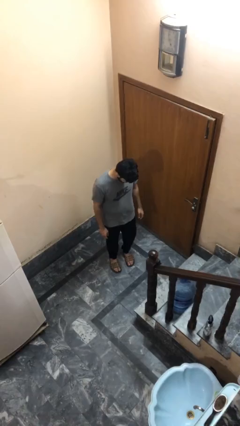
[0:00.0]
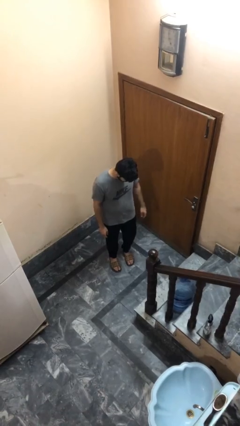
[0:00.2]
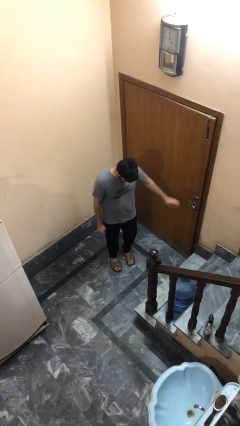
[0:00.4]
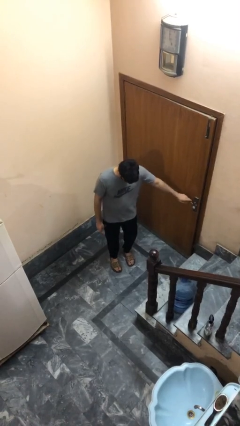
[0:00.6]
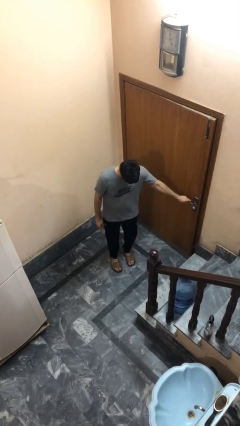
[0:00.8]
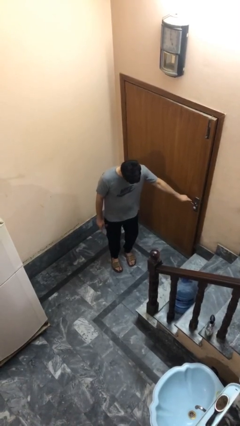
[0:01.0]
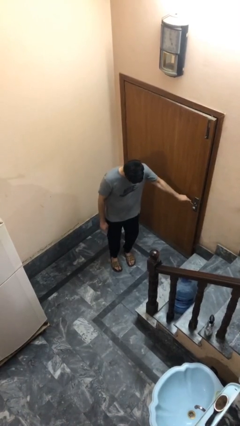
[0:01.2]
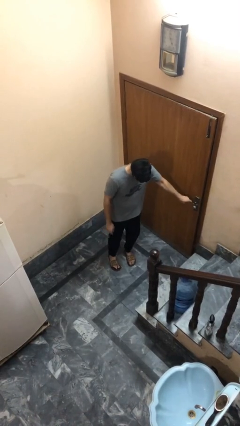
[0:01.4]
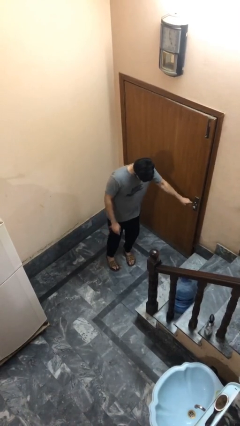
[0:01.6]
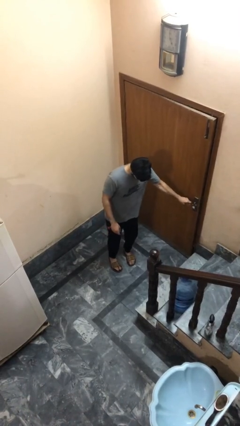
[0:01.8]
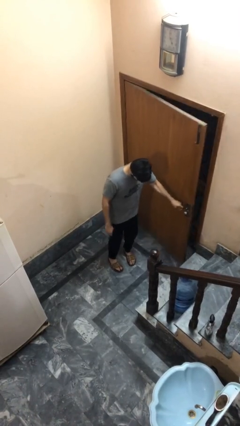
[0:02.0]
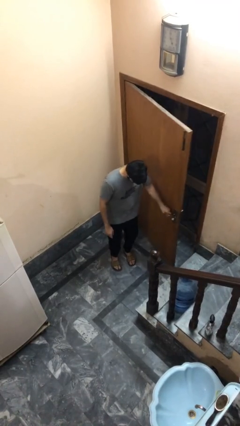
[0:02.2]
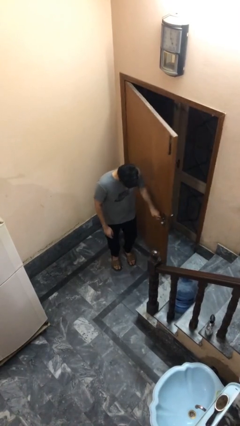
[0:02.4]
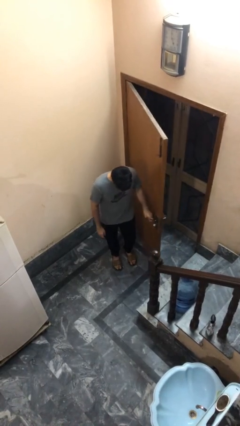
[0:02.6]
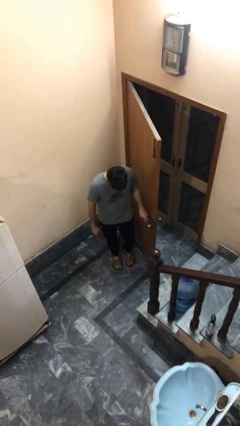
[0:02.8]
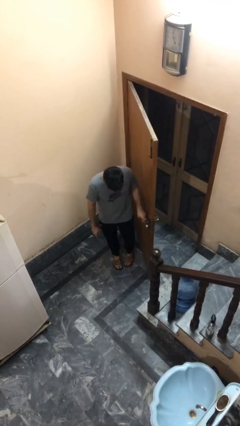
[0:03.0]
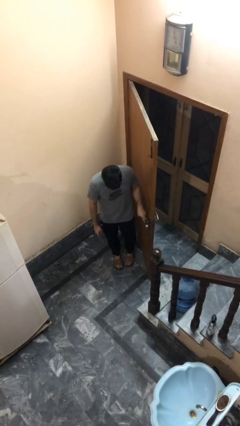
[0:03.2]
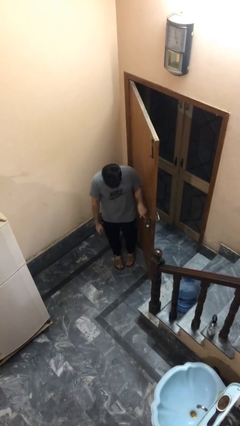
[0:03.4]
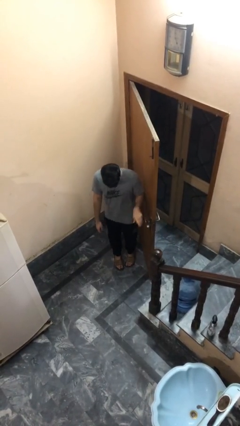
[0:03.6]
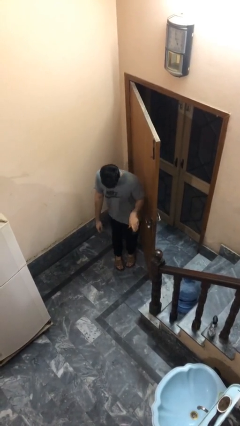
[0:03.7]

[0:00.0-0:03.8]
person opens facility door

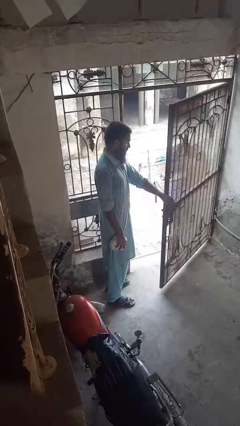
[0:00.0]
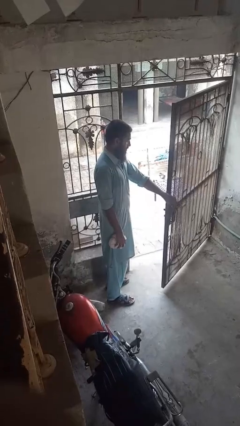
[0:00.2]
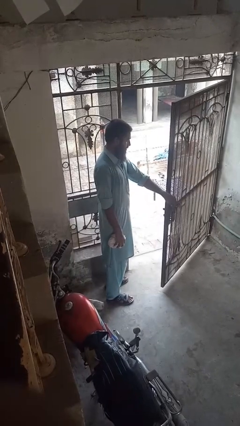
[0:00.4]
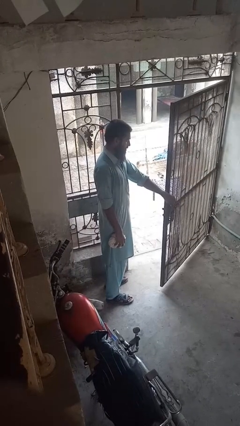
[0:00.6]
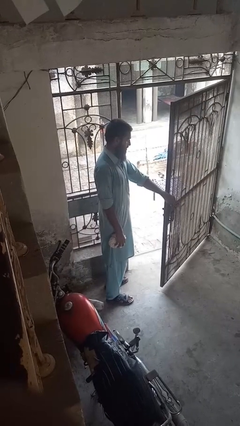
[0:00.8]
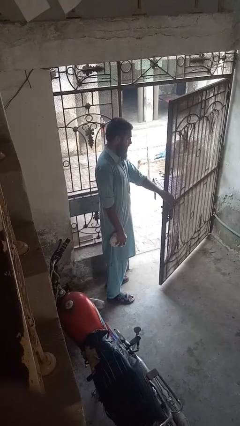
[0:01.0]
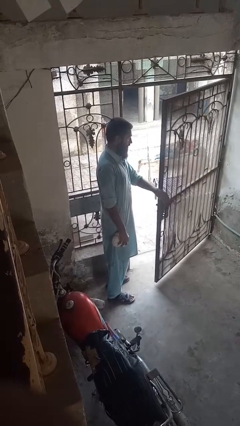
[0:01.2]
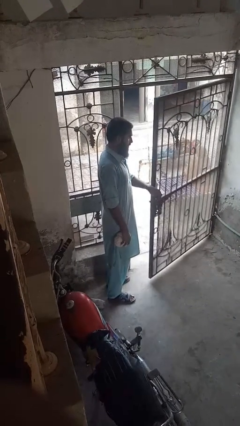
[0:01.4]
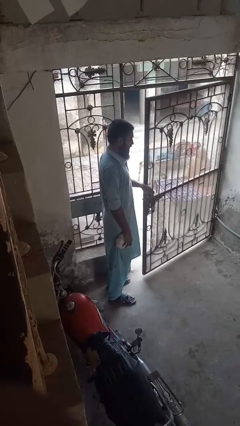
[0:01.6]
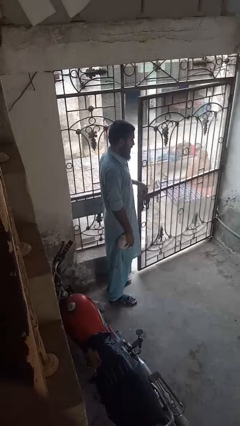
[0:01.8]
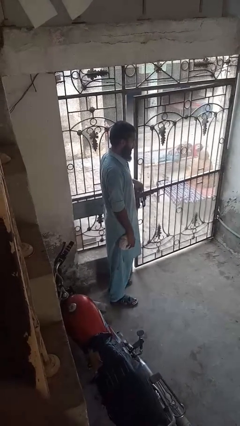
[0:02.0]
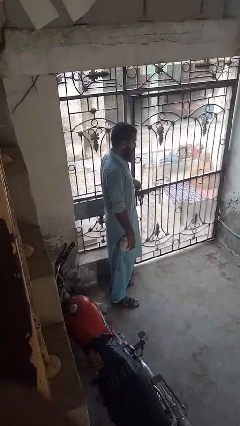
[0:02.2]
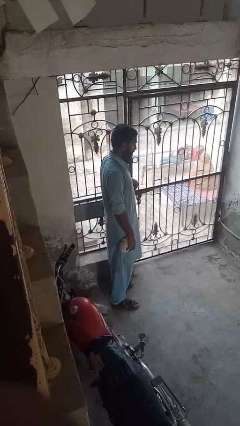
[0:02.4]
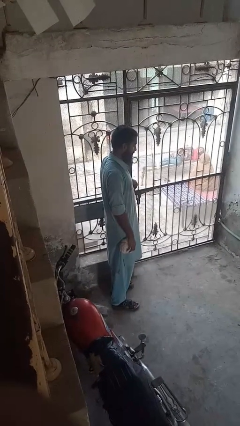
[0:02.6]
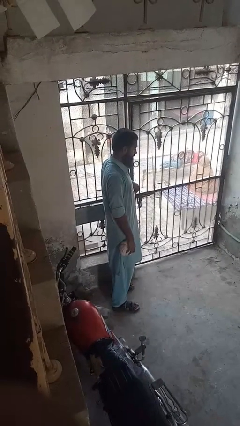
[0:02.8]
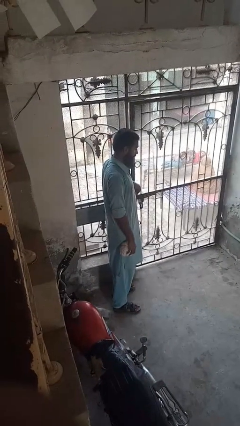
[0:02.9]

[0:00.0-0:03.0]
person closes gate

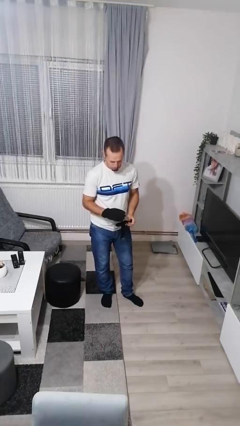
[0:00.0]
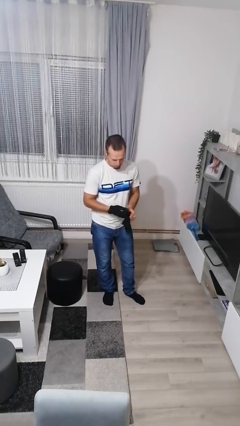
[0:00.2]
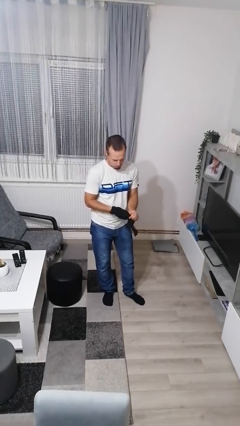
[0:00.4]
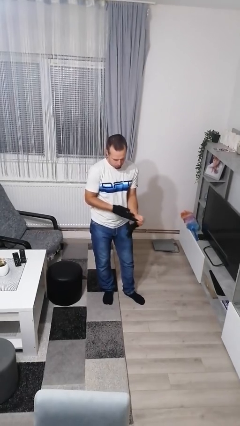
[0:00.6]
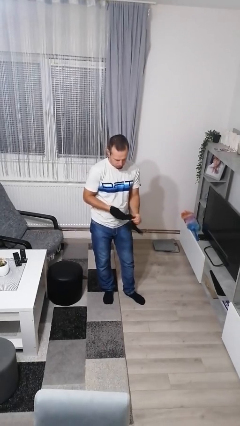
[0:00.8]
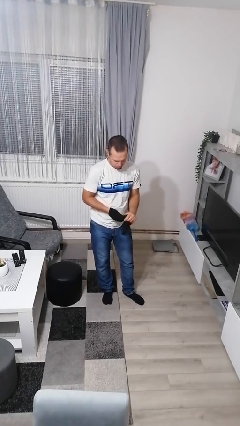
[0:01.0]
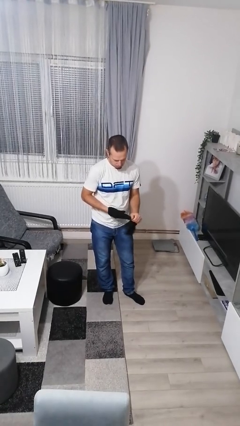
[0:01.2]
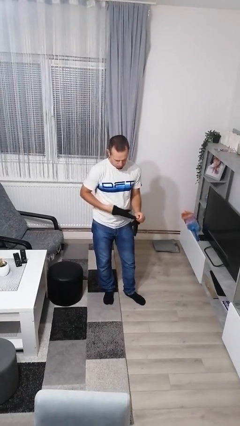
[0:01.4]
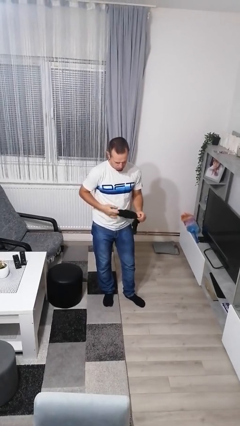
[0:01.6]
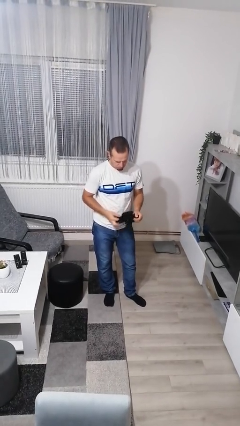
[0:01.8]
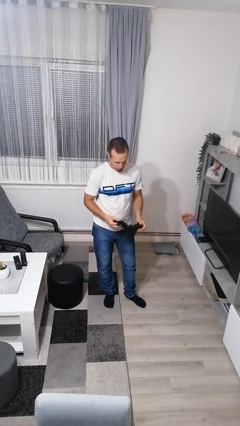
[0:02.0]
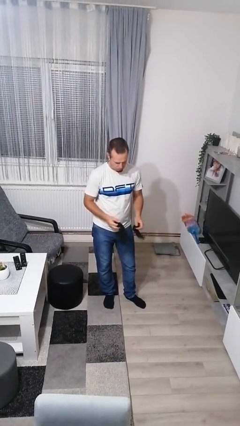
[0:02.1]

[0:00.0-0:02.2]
person takes off gloves

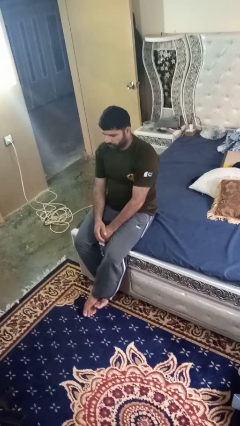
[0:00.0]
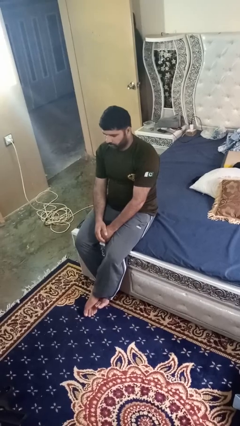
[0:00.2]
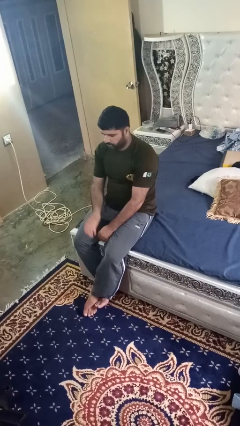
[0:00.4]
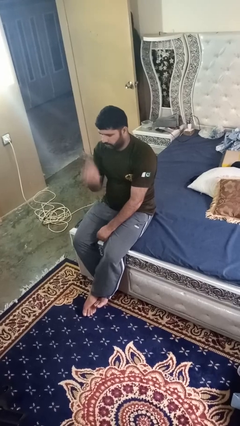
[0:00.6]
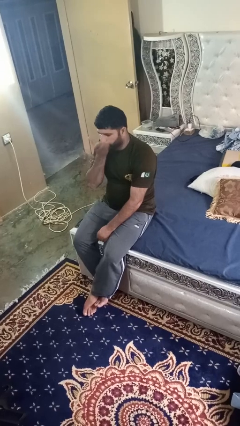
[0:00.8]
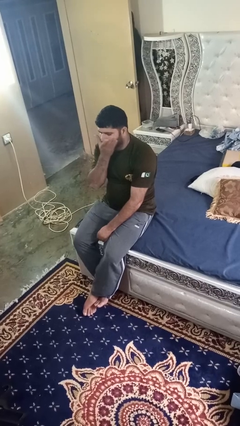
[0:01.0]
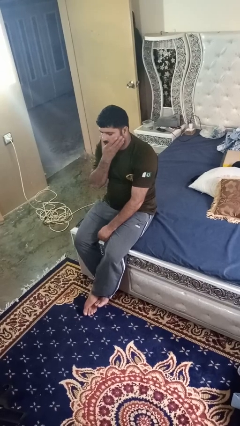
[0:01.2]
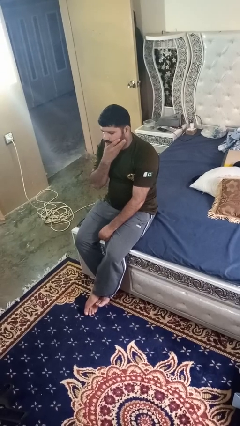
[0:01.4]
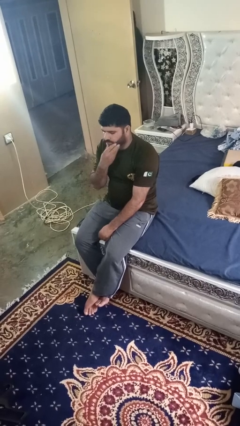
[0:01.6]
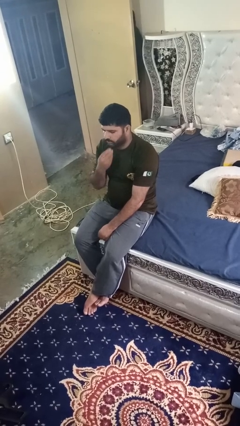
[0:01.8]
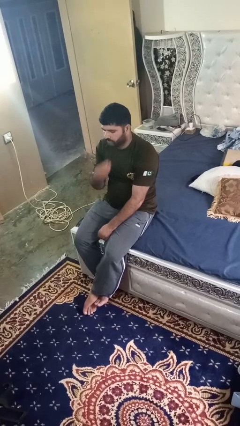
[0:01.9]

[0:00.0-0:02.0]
person strokes chin

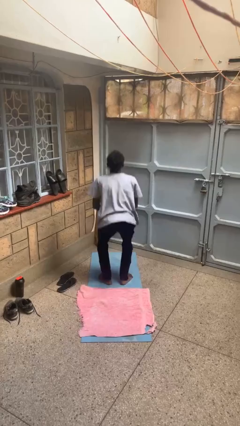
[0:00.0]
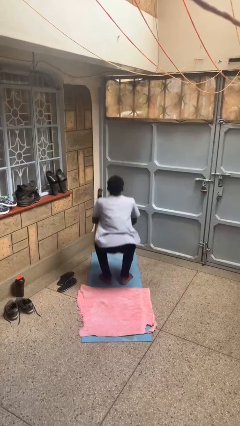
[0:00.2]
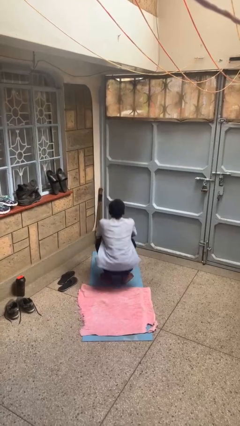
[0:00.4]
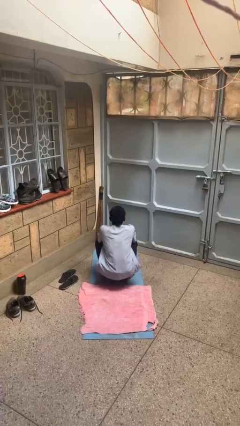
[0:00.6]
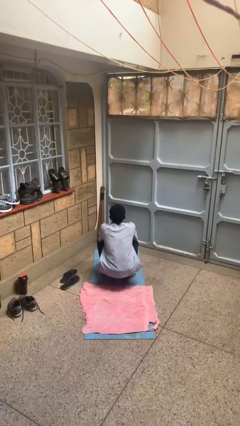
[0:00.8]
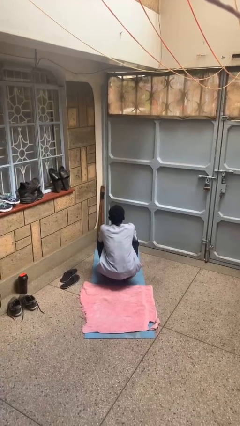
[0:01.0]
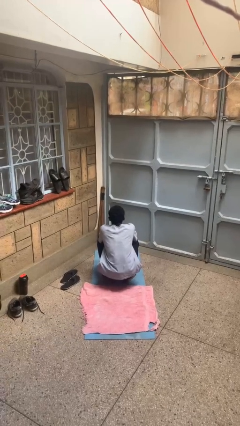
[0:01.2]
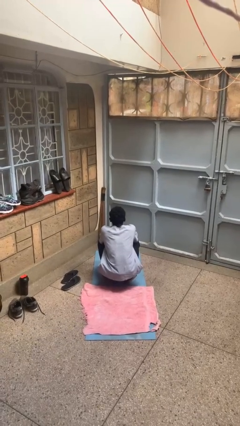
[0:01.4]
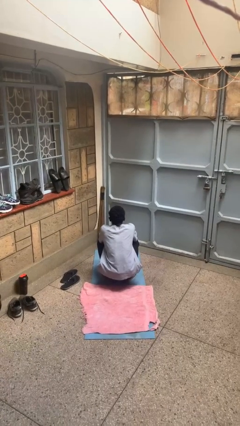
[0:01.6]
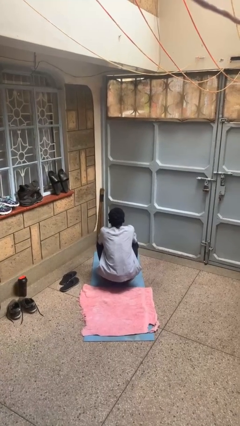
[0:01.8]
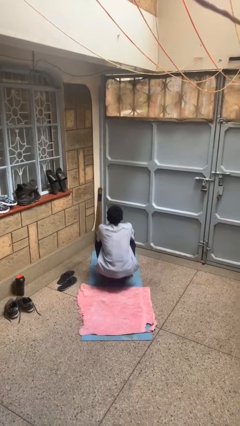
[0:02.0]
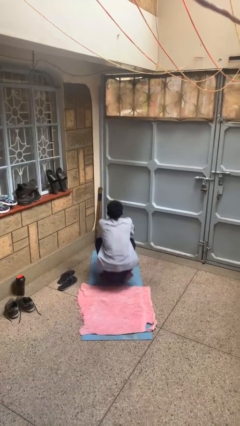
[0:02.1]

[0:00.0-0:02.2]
person squats

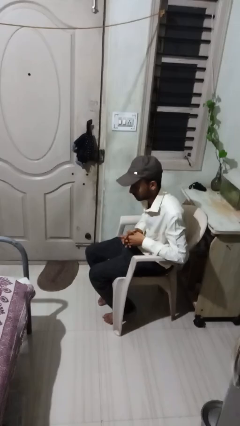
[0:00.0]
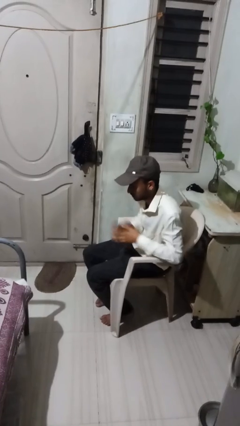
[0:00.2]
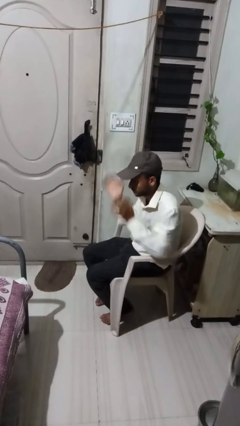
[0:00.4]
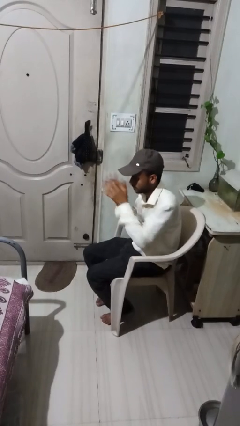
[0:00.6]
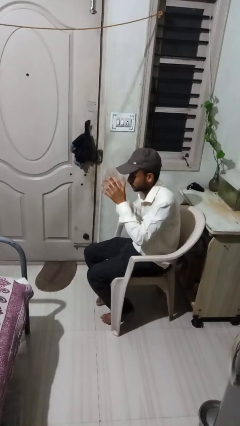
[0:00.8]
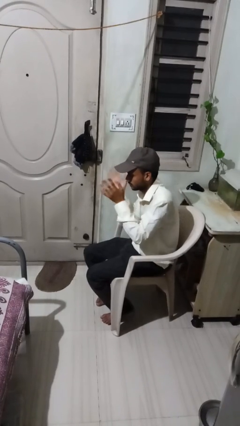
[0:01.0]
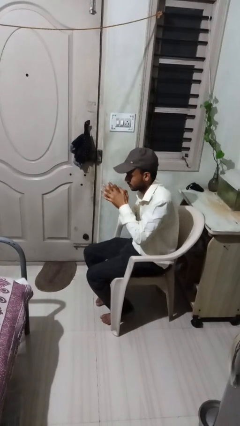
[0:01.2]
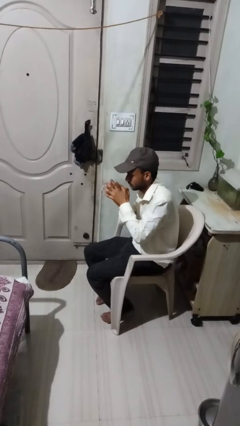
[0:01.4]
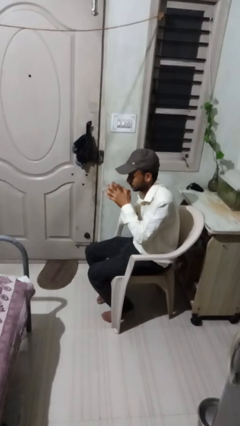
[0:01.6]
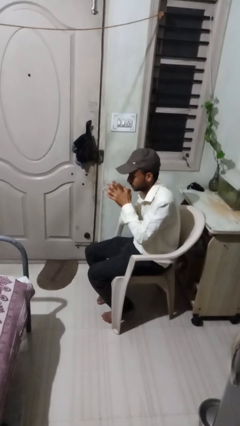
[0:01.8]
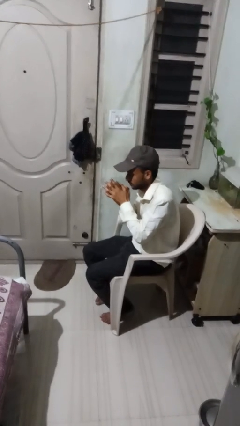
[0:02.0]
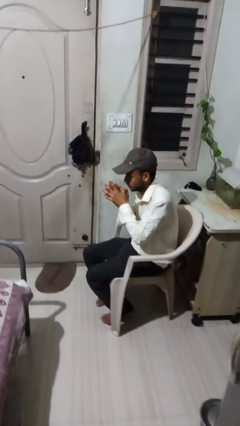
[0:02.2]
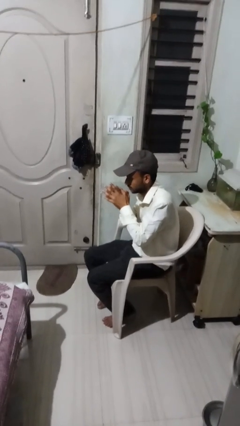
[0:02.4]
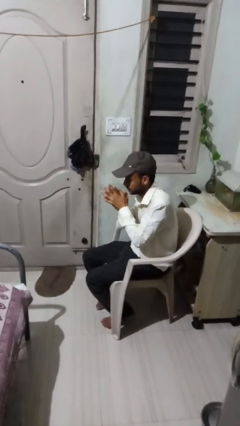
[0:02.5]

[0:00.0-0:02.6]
person claps hands

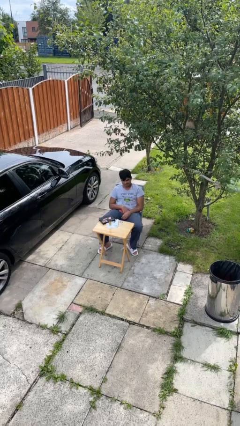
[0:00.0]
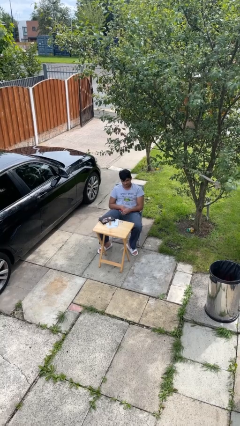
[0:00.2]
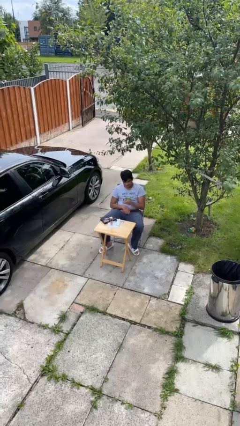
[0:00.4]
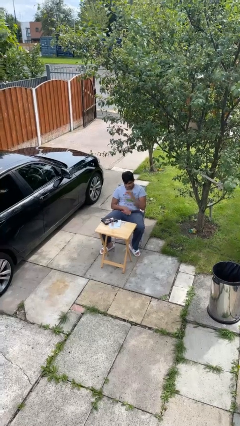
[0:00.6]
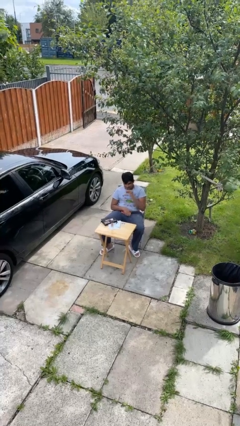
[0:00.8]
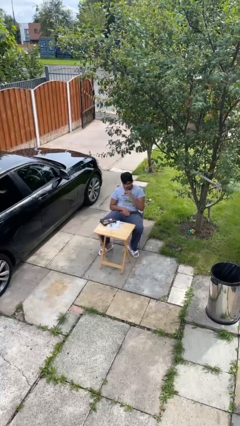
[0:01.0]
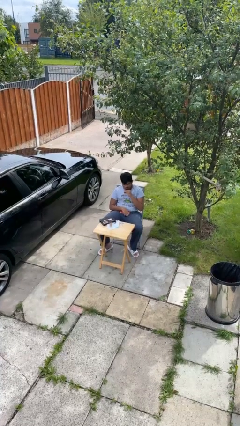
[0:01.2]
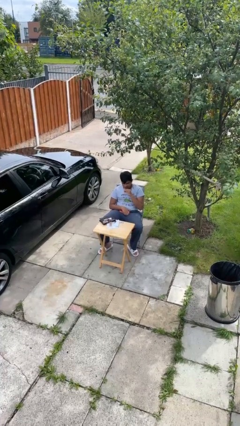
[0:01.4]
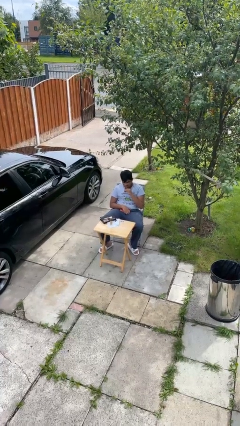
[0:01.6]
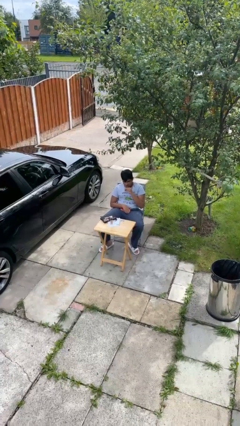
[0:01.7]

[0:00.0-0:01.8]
person applies lip makeup
